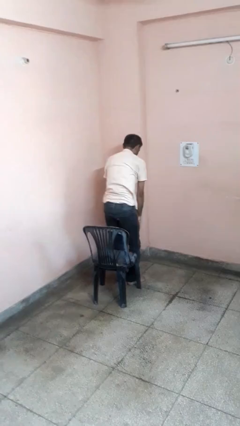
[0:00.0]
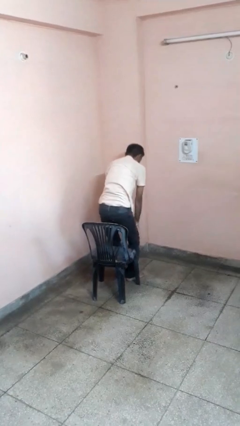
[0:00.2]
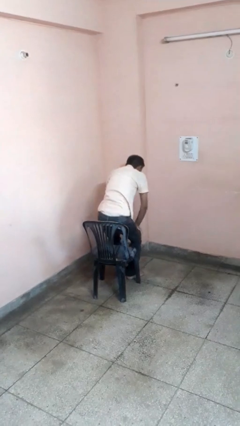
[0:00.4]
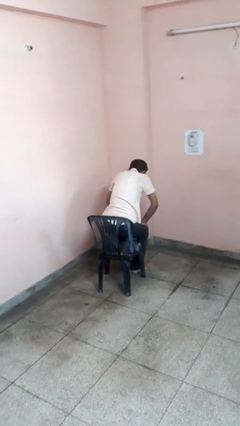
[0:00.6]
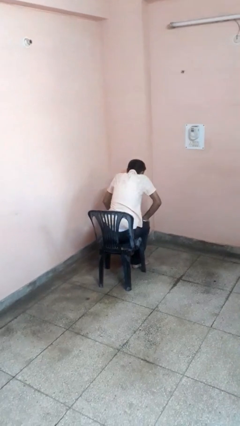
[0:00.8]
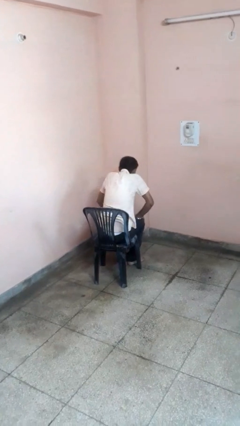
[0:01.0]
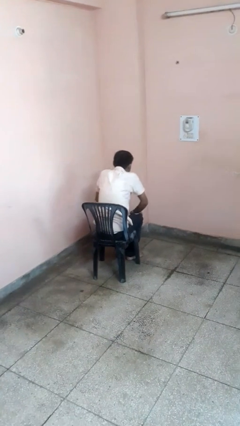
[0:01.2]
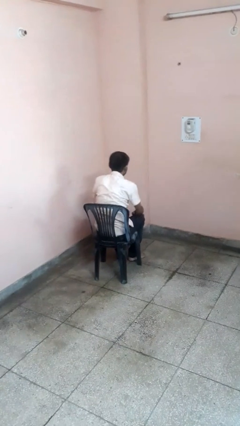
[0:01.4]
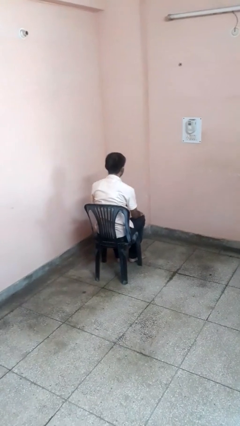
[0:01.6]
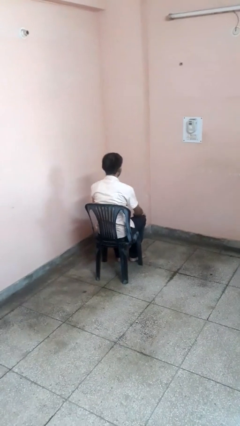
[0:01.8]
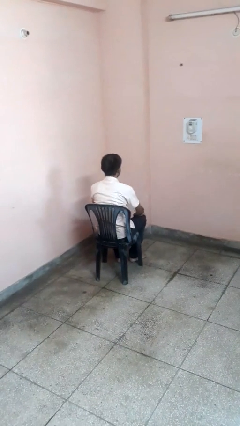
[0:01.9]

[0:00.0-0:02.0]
person sits down

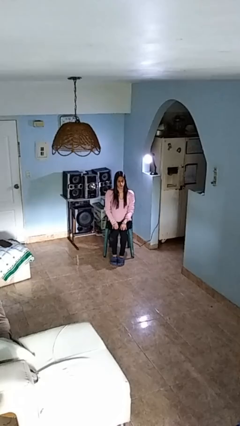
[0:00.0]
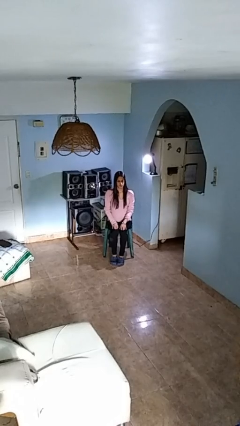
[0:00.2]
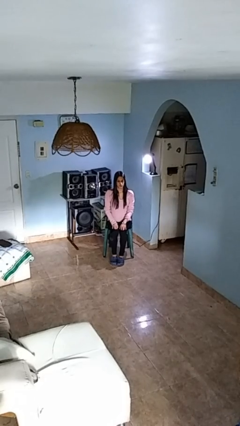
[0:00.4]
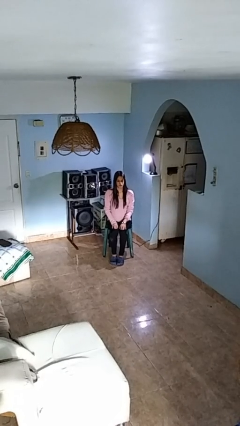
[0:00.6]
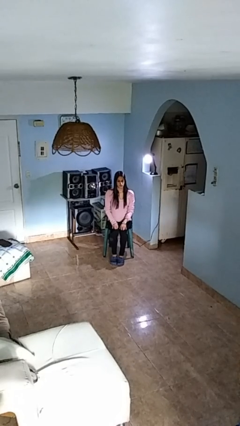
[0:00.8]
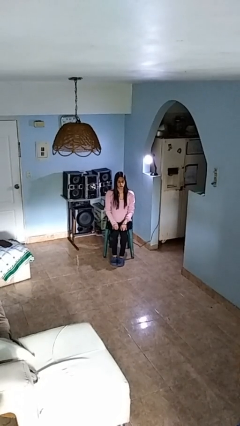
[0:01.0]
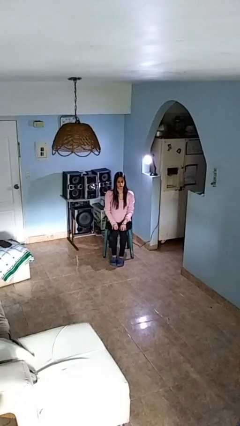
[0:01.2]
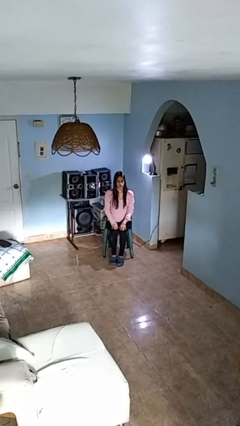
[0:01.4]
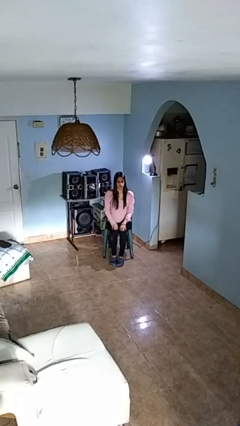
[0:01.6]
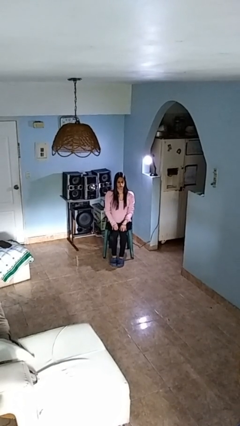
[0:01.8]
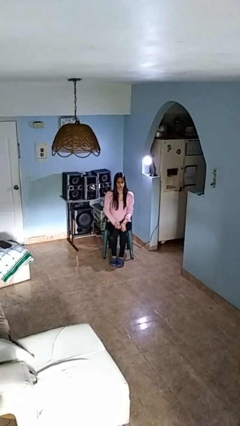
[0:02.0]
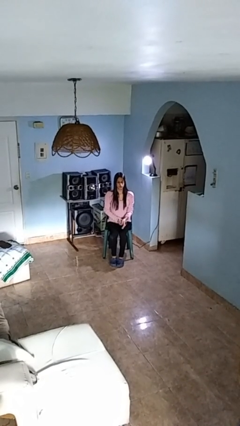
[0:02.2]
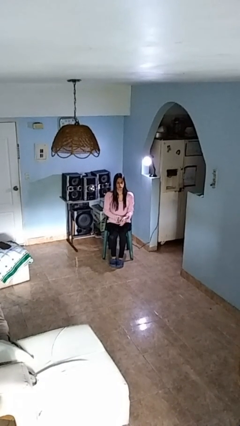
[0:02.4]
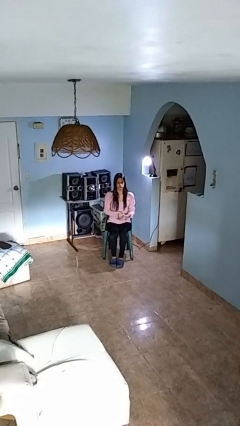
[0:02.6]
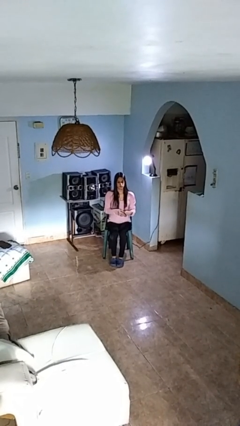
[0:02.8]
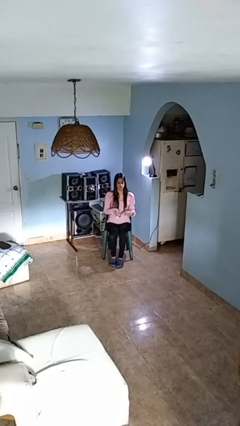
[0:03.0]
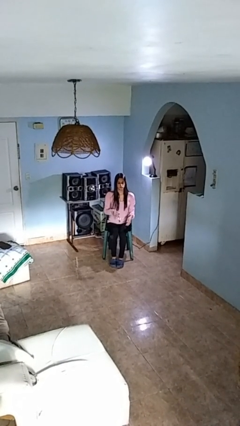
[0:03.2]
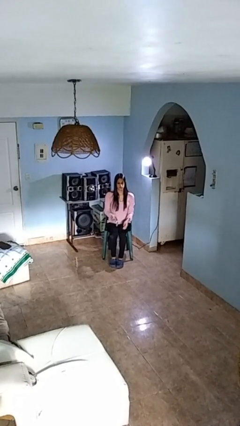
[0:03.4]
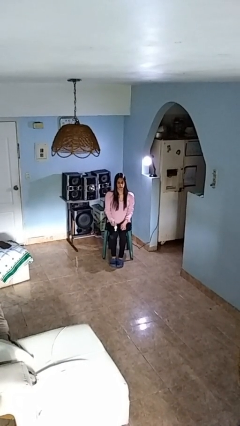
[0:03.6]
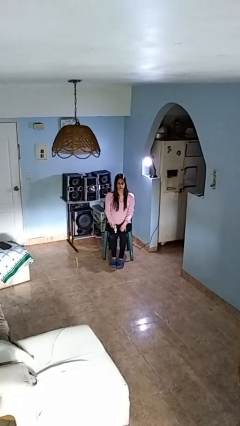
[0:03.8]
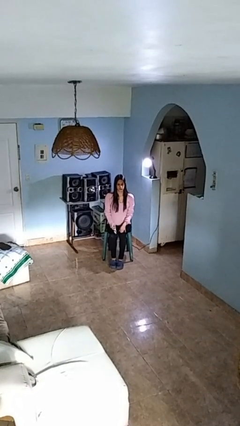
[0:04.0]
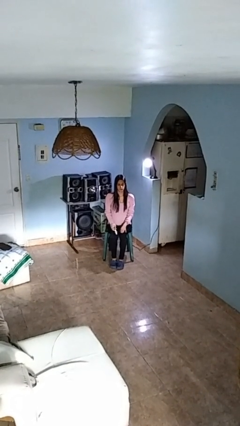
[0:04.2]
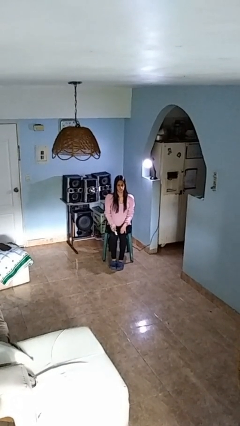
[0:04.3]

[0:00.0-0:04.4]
person takes off wristwatch

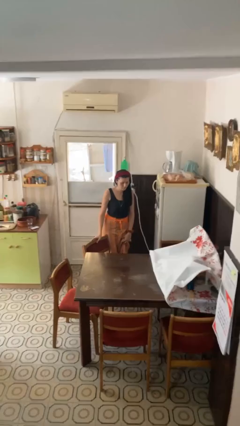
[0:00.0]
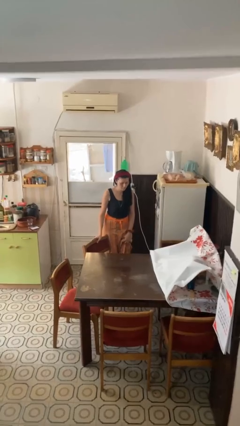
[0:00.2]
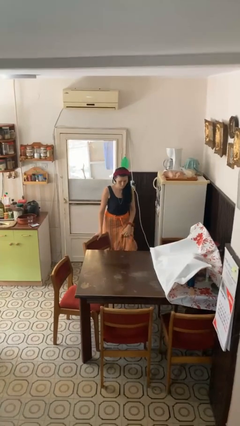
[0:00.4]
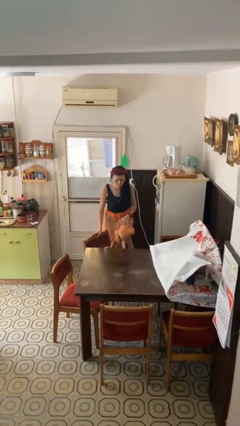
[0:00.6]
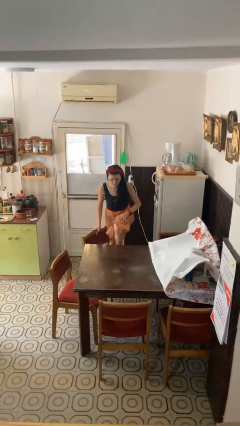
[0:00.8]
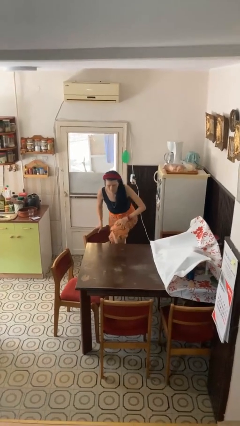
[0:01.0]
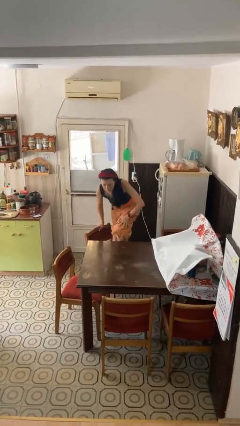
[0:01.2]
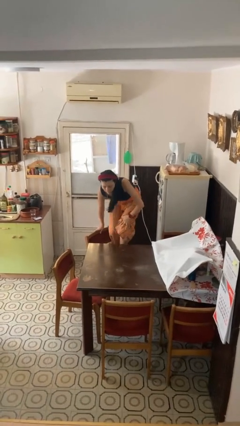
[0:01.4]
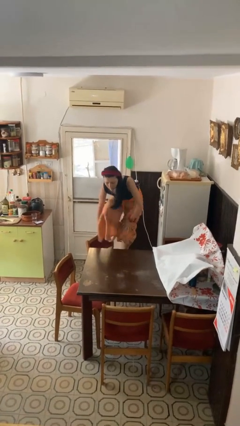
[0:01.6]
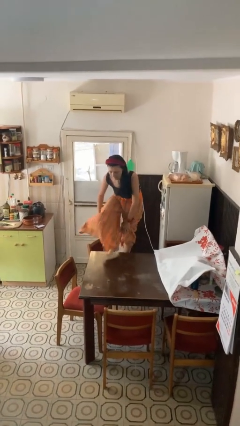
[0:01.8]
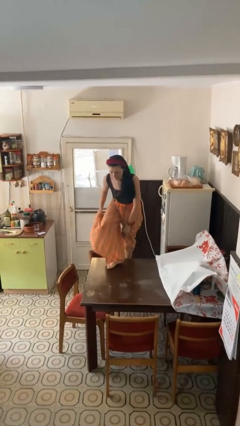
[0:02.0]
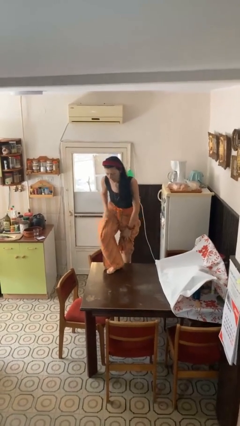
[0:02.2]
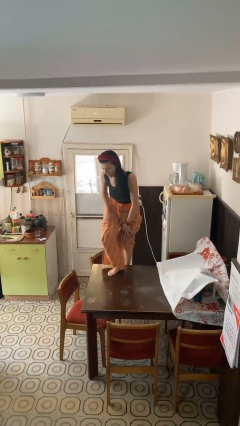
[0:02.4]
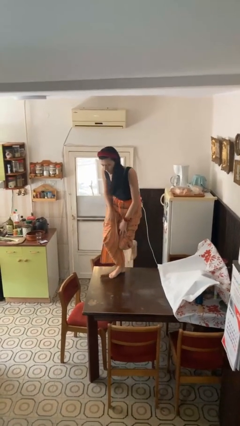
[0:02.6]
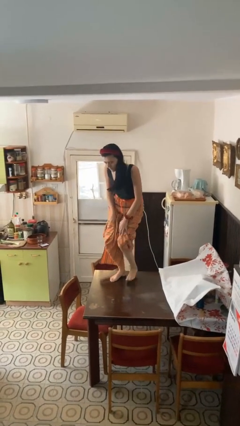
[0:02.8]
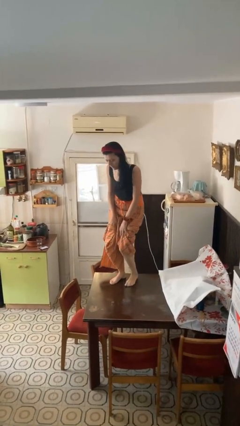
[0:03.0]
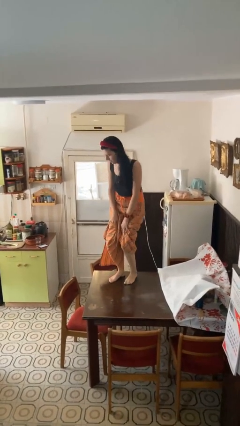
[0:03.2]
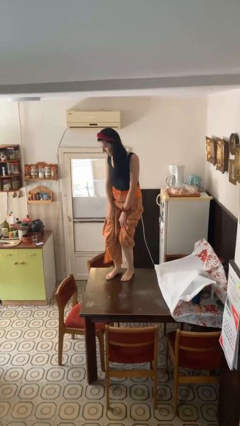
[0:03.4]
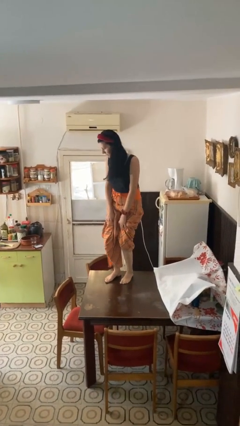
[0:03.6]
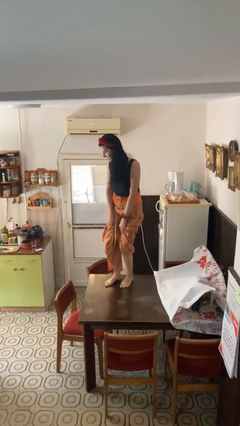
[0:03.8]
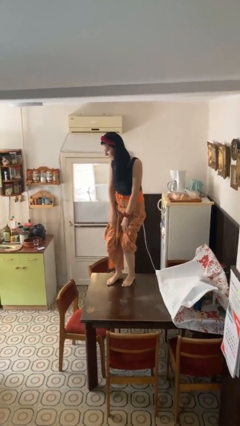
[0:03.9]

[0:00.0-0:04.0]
person climbs on table

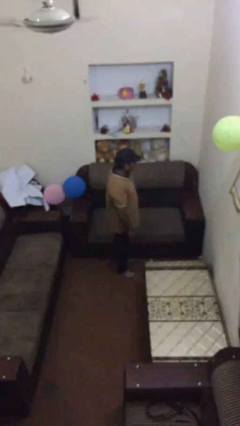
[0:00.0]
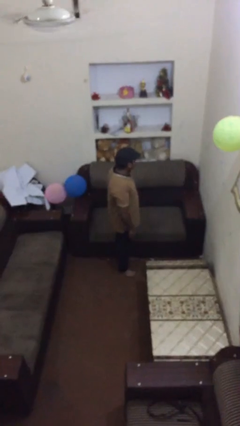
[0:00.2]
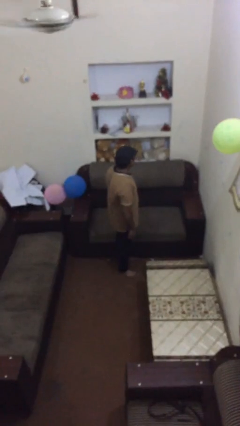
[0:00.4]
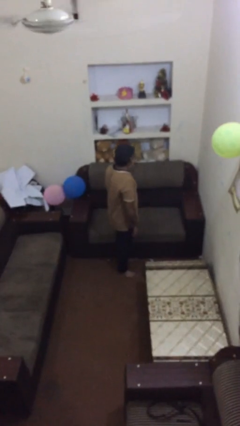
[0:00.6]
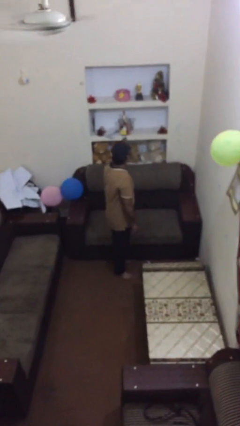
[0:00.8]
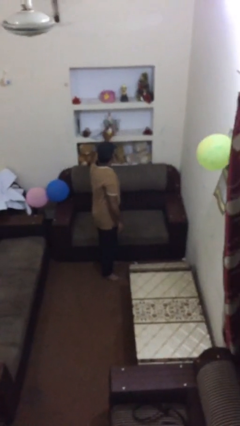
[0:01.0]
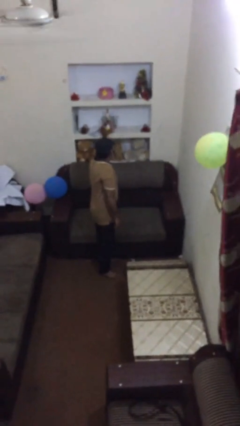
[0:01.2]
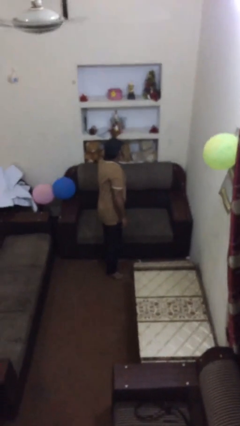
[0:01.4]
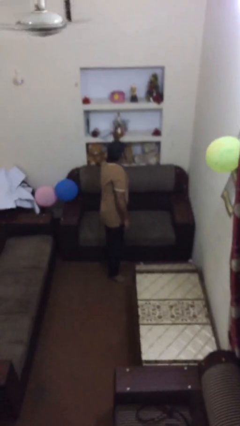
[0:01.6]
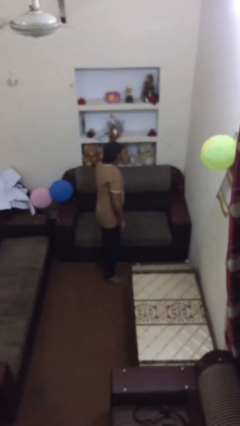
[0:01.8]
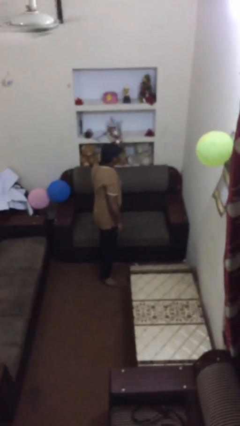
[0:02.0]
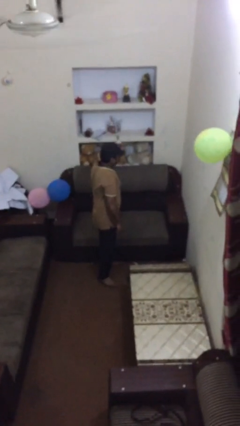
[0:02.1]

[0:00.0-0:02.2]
person picks up object from shelf

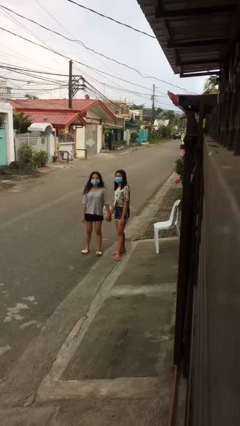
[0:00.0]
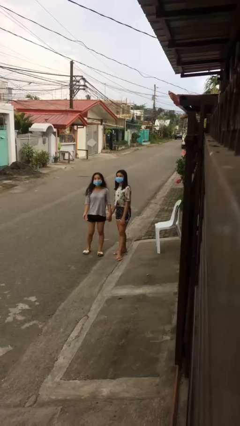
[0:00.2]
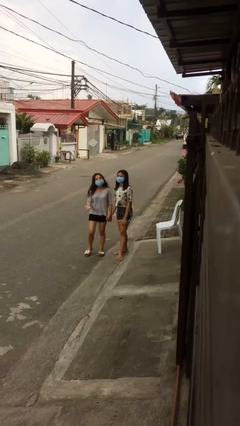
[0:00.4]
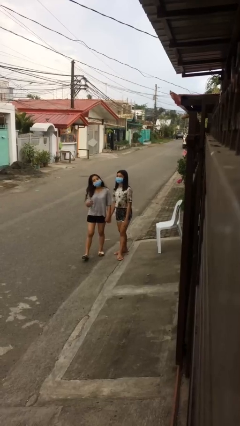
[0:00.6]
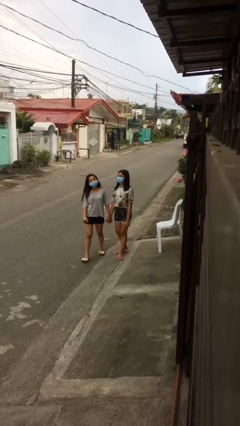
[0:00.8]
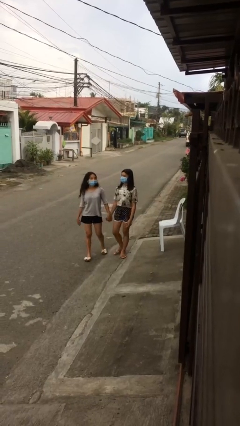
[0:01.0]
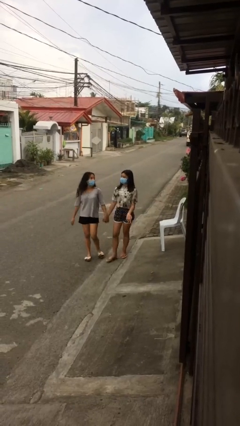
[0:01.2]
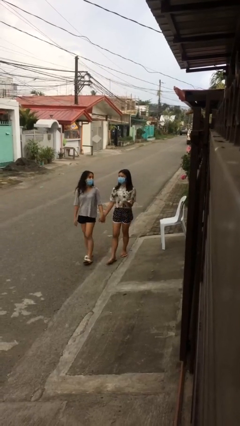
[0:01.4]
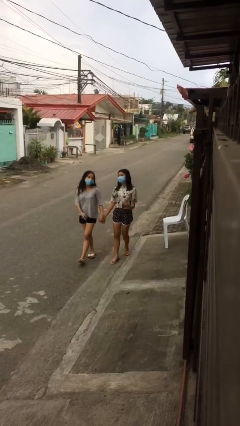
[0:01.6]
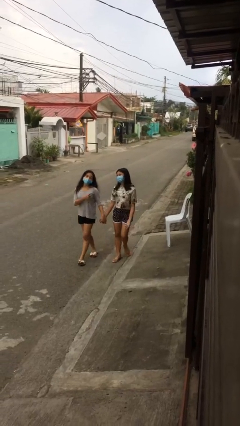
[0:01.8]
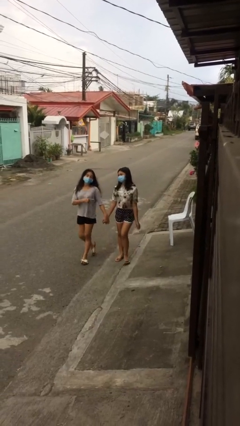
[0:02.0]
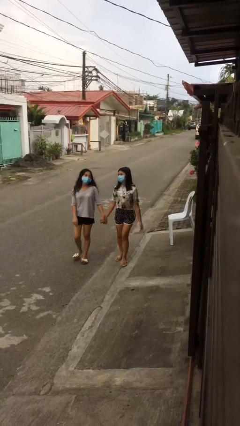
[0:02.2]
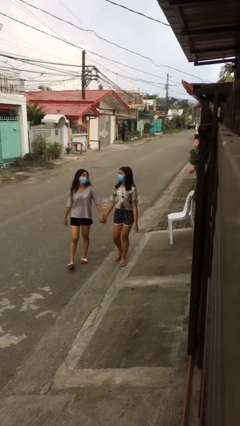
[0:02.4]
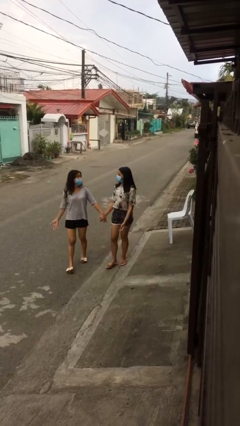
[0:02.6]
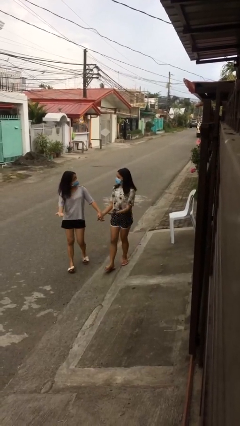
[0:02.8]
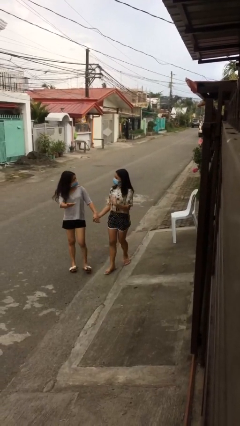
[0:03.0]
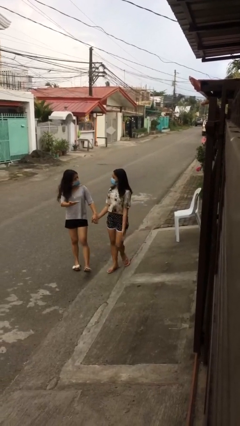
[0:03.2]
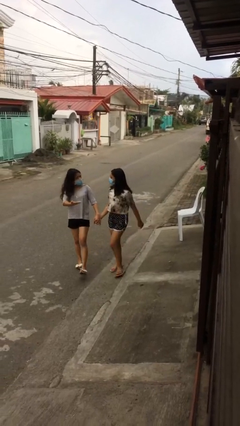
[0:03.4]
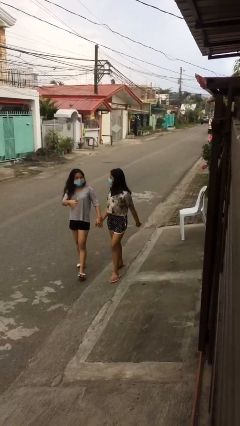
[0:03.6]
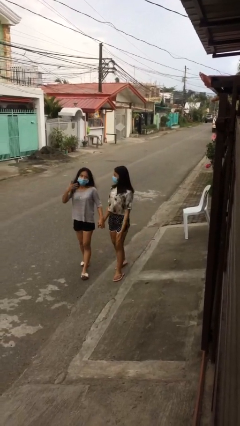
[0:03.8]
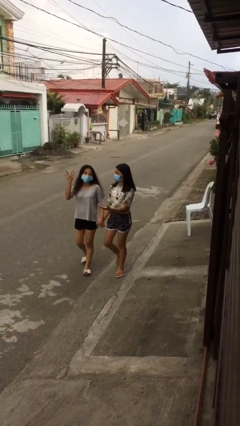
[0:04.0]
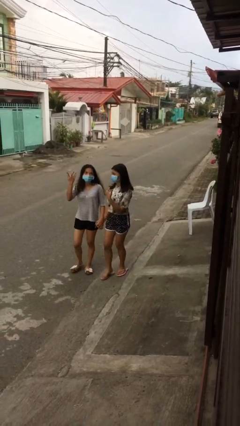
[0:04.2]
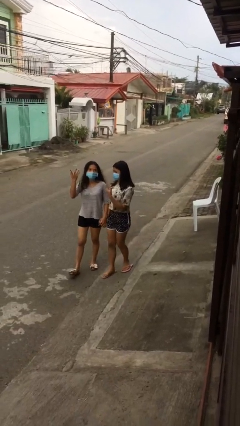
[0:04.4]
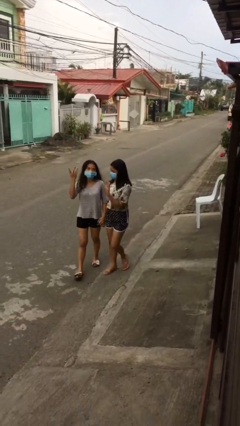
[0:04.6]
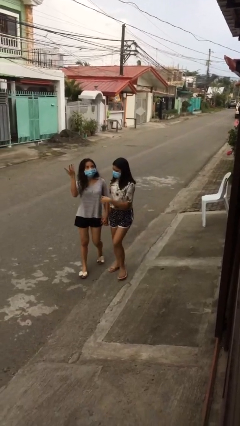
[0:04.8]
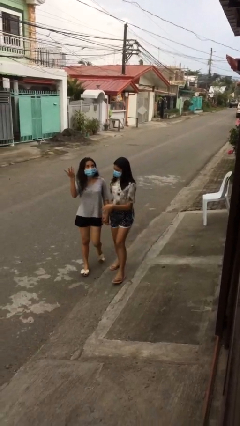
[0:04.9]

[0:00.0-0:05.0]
person holds hand
